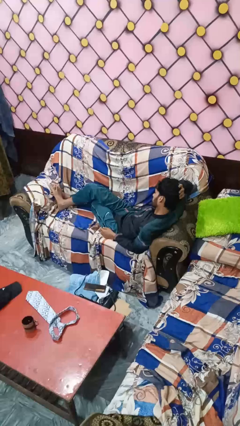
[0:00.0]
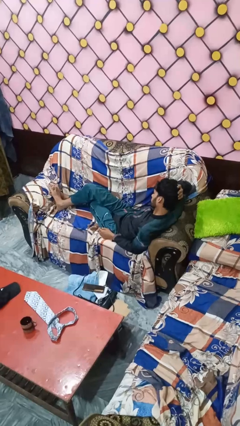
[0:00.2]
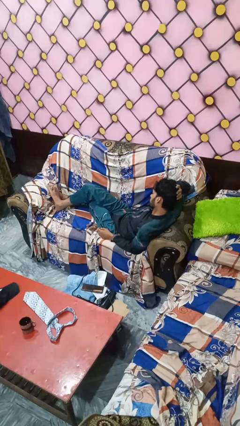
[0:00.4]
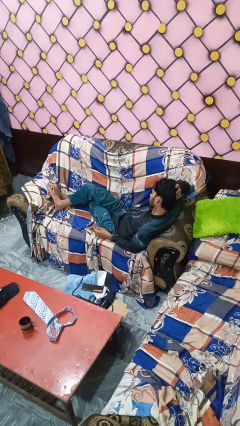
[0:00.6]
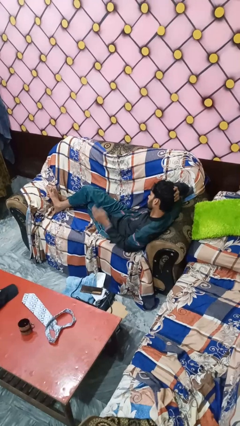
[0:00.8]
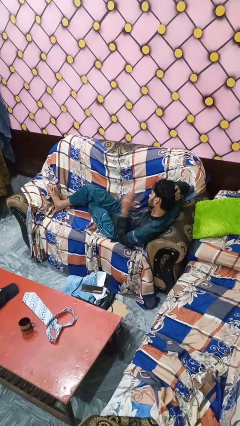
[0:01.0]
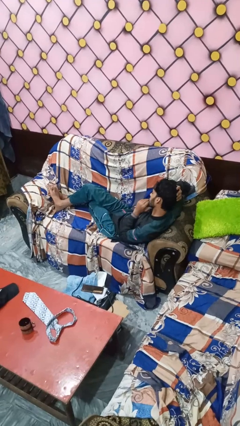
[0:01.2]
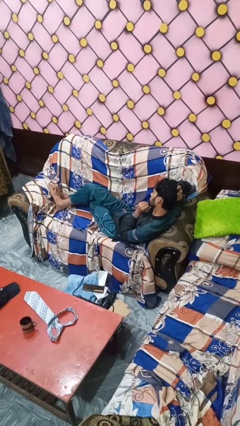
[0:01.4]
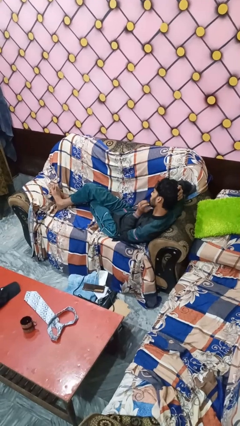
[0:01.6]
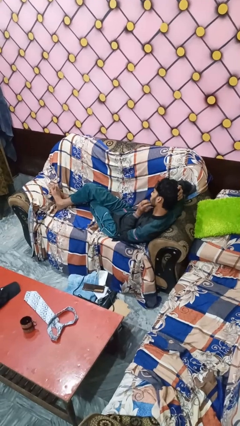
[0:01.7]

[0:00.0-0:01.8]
person strokes chin

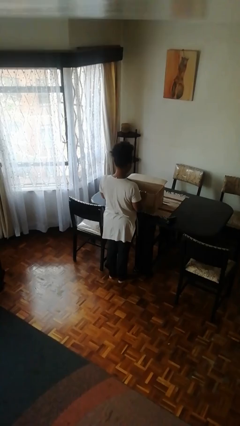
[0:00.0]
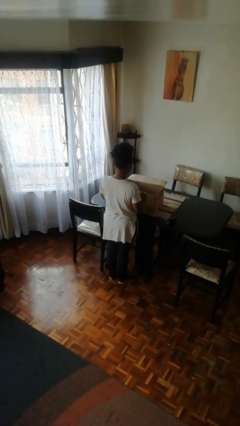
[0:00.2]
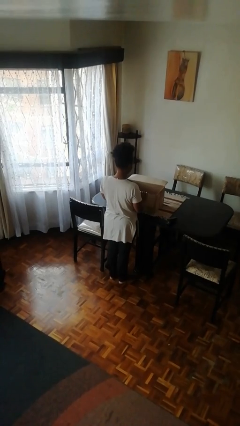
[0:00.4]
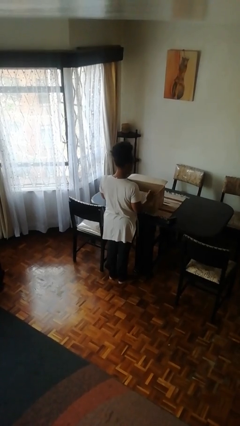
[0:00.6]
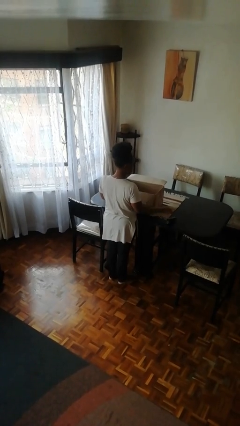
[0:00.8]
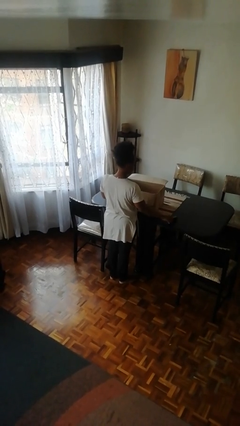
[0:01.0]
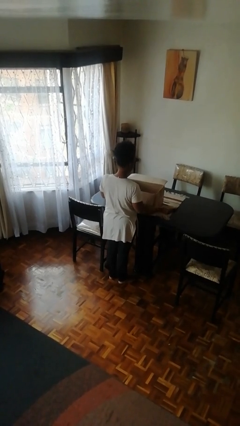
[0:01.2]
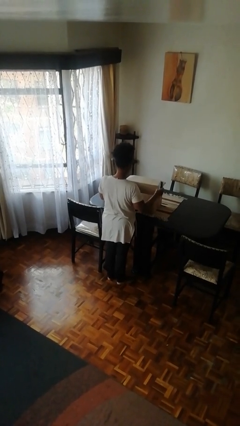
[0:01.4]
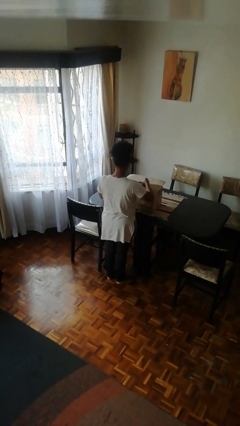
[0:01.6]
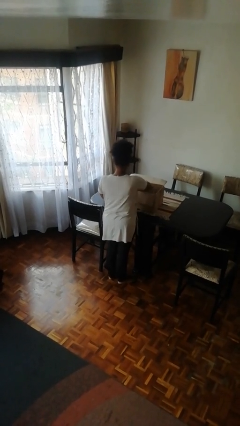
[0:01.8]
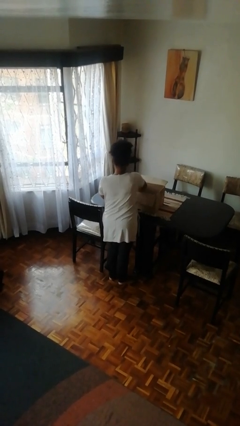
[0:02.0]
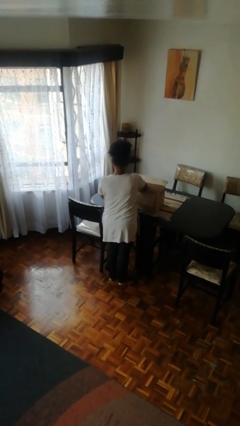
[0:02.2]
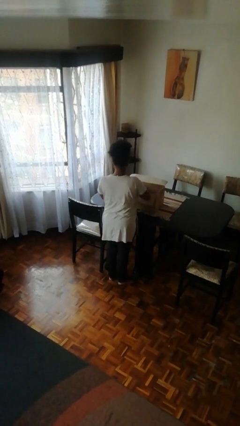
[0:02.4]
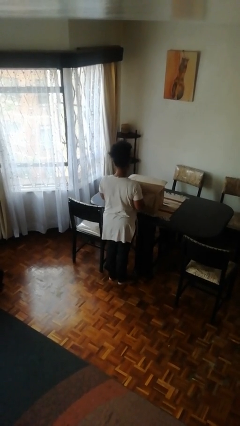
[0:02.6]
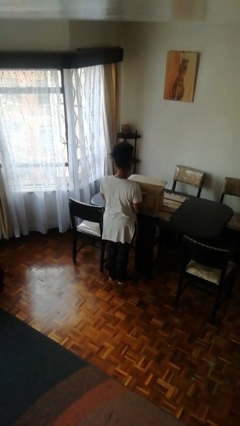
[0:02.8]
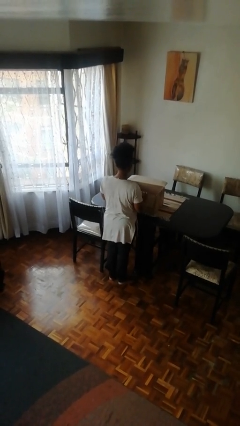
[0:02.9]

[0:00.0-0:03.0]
person puts object into box

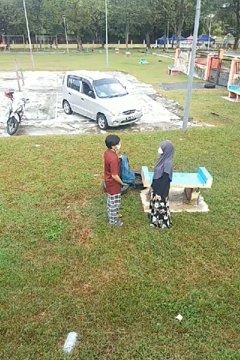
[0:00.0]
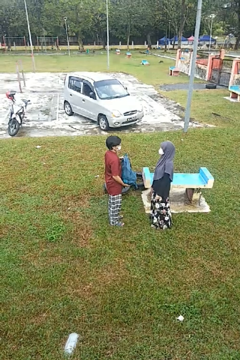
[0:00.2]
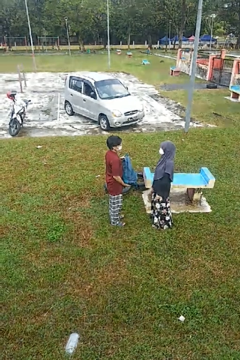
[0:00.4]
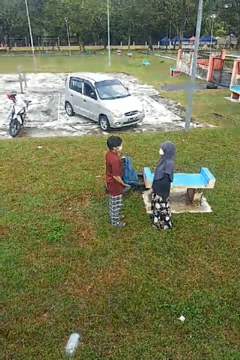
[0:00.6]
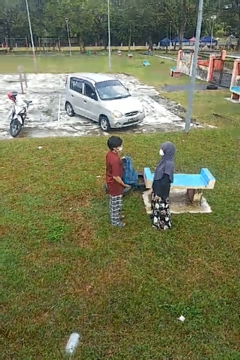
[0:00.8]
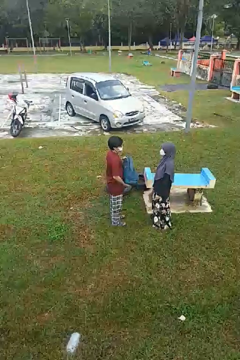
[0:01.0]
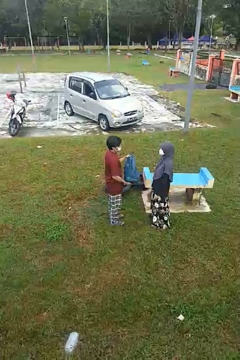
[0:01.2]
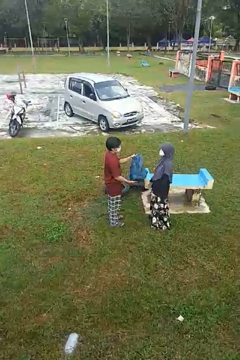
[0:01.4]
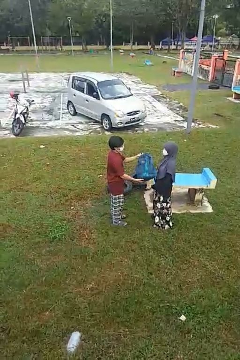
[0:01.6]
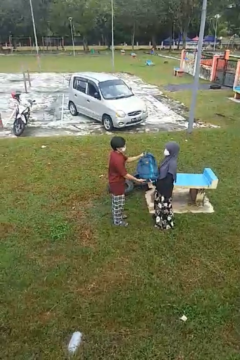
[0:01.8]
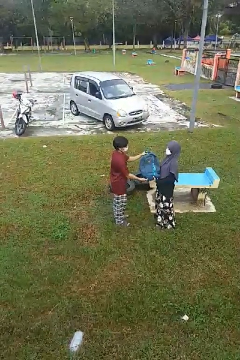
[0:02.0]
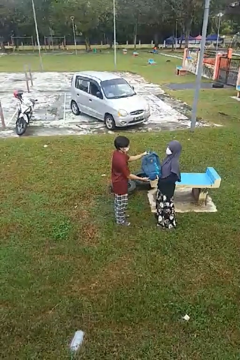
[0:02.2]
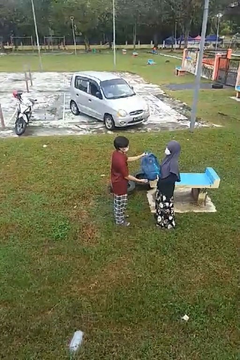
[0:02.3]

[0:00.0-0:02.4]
person transfers object to person

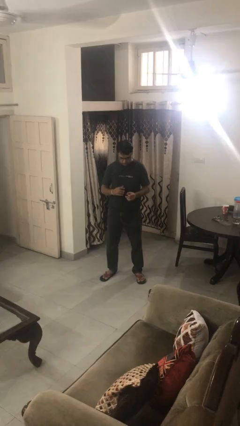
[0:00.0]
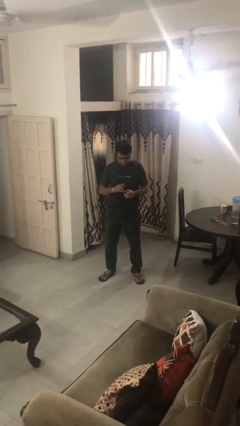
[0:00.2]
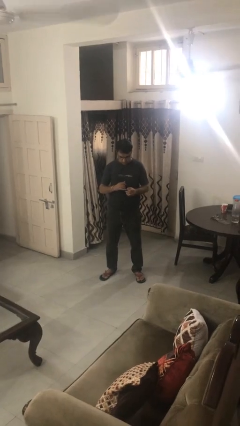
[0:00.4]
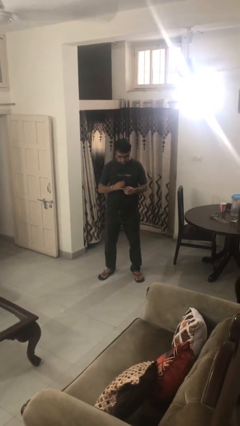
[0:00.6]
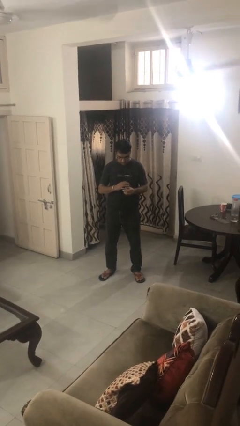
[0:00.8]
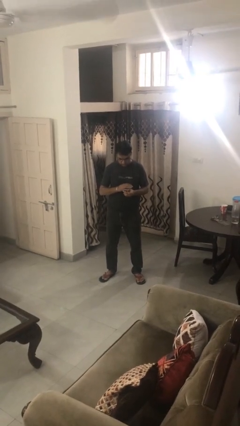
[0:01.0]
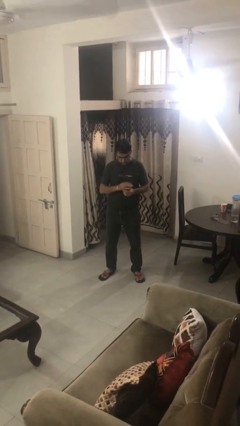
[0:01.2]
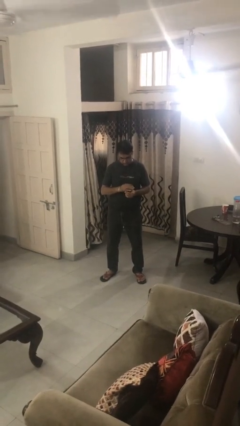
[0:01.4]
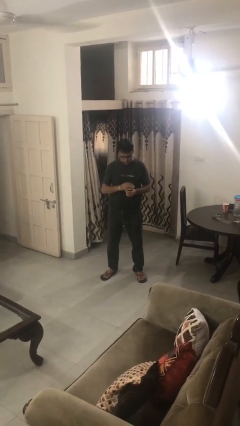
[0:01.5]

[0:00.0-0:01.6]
person puts on ring

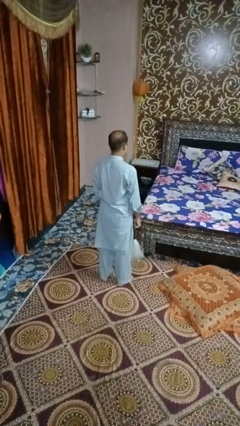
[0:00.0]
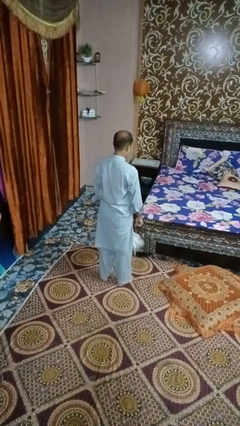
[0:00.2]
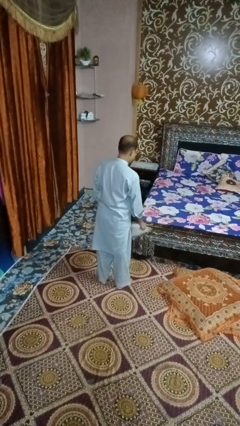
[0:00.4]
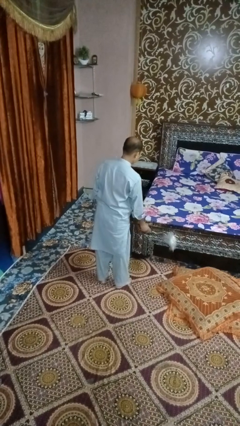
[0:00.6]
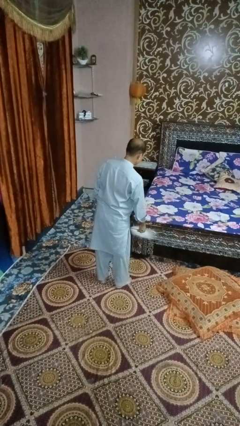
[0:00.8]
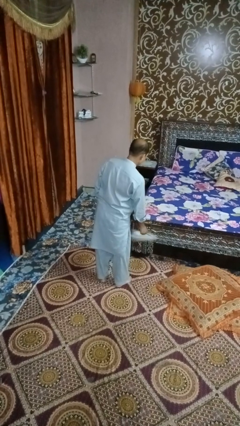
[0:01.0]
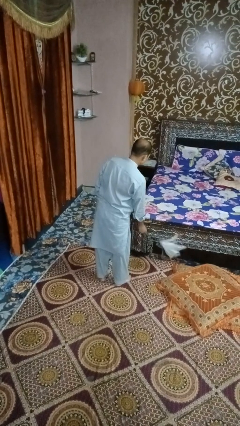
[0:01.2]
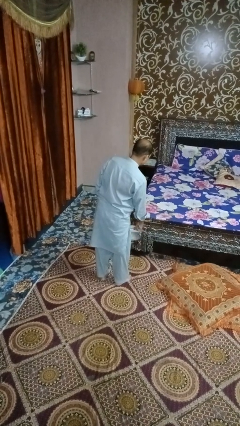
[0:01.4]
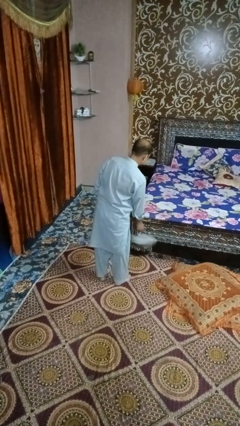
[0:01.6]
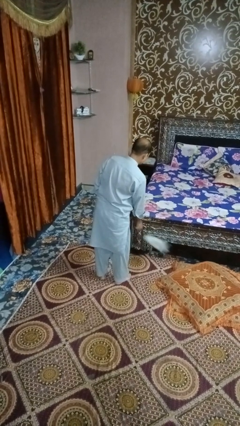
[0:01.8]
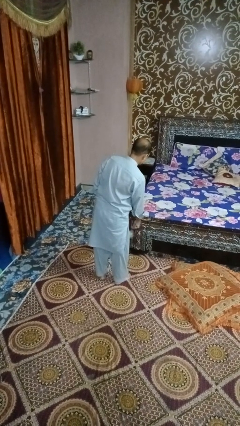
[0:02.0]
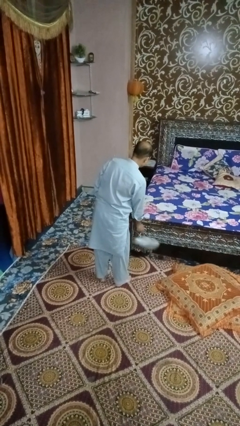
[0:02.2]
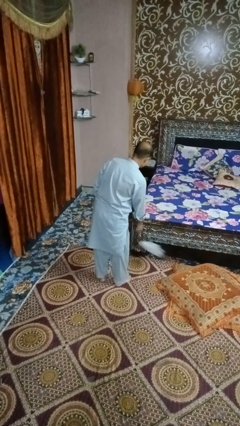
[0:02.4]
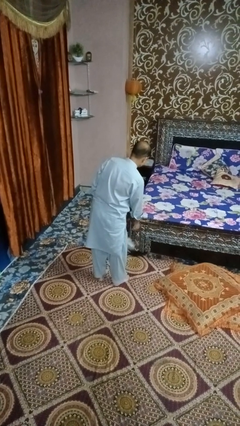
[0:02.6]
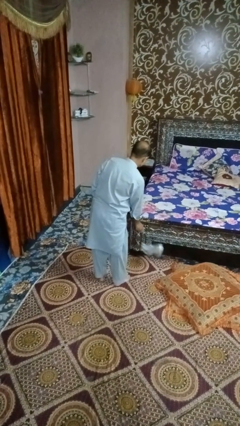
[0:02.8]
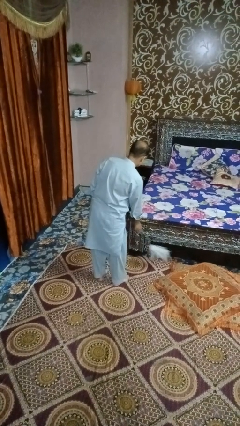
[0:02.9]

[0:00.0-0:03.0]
person dusts furniture

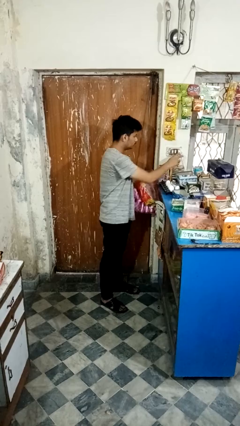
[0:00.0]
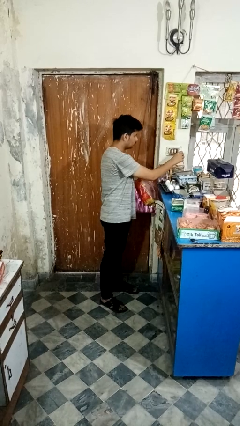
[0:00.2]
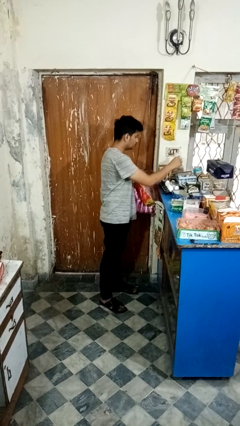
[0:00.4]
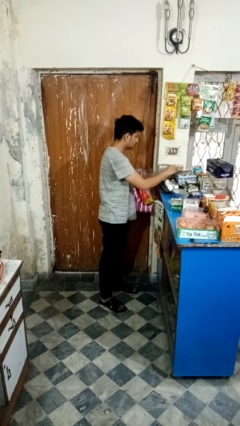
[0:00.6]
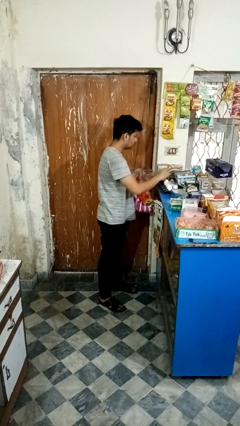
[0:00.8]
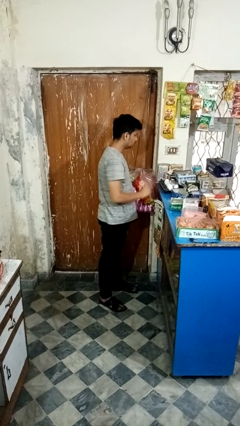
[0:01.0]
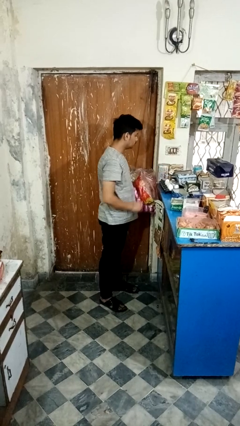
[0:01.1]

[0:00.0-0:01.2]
person unplugs from electrical socket

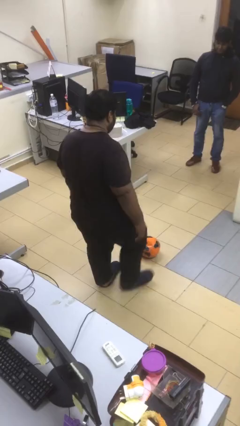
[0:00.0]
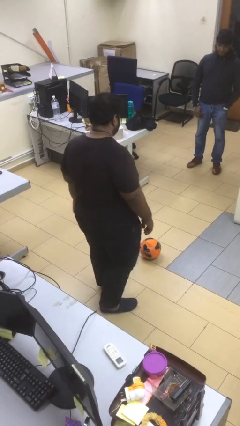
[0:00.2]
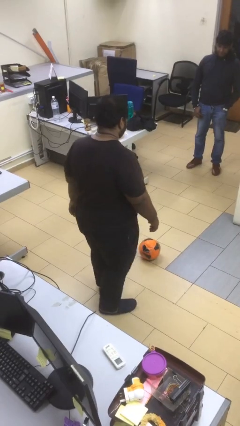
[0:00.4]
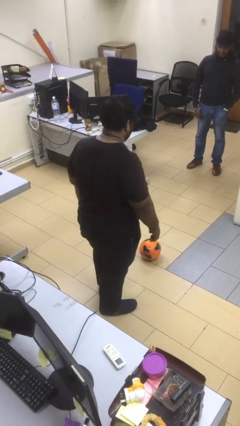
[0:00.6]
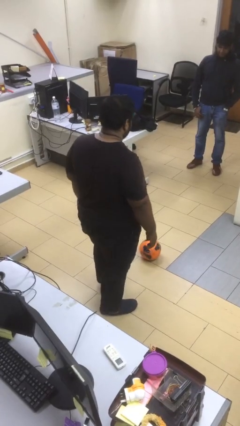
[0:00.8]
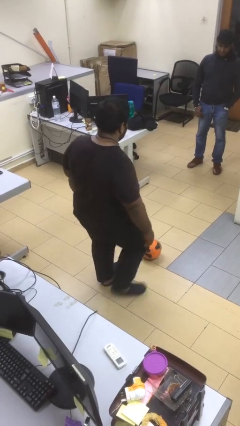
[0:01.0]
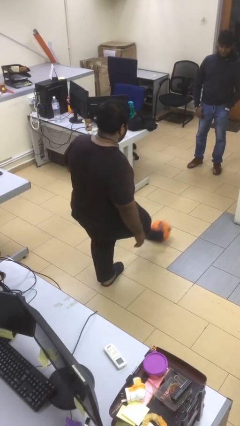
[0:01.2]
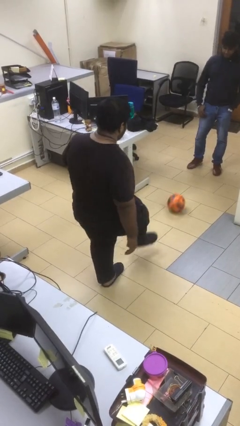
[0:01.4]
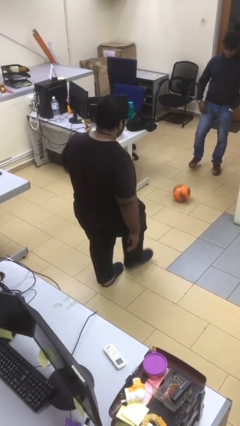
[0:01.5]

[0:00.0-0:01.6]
person kicks object to person

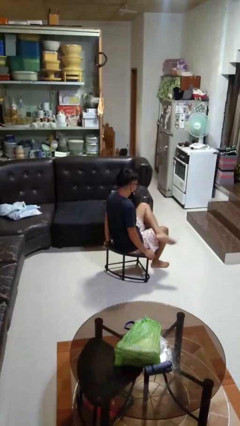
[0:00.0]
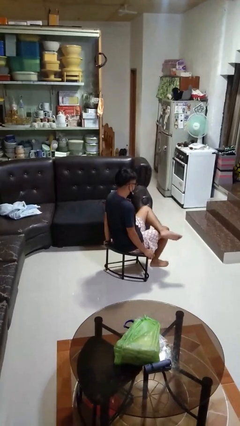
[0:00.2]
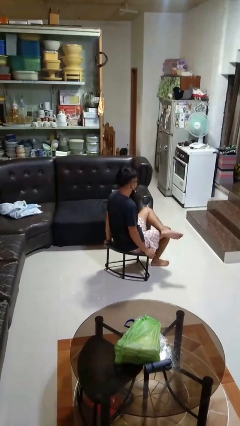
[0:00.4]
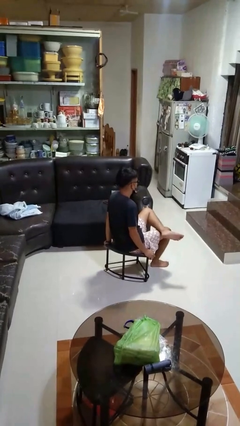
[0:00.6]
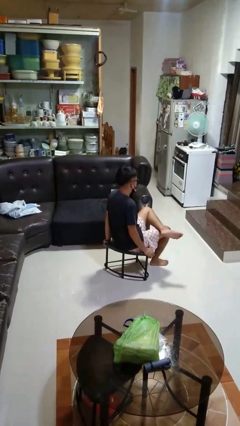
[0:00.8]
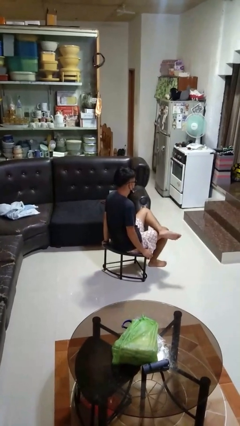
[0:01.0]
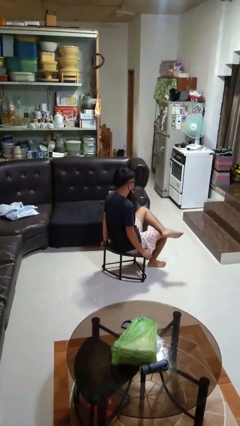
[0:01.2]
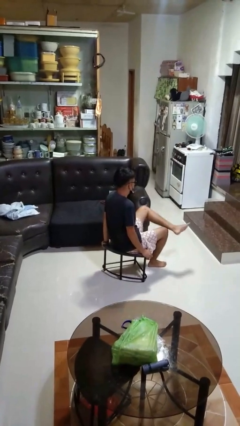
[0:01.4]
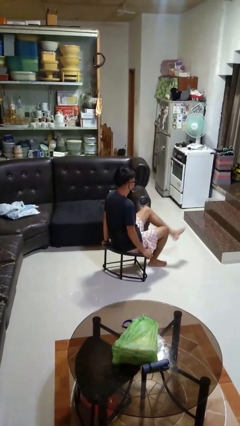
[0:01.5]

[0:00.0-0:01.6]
person crosses legs

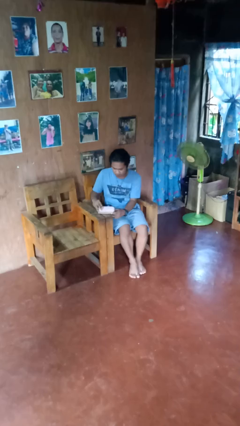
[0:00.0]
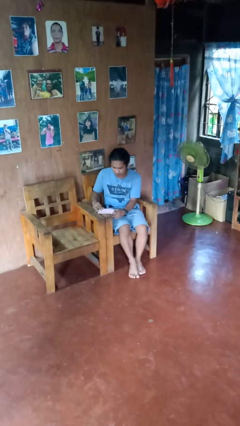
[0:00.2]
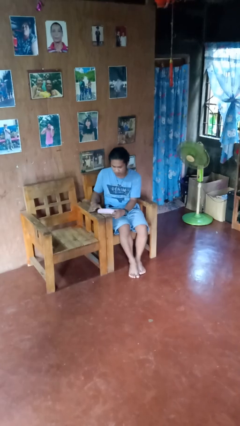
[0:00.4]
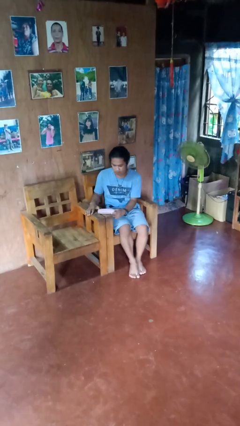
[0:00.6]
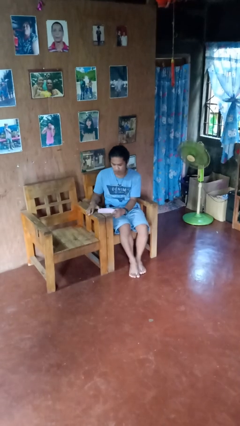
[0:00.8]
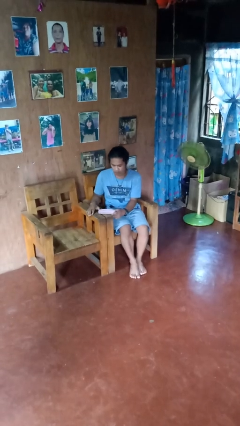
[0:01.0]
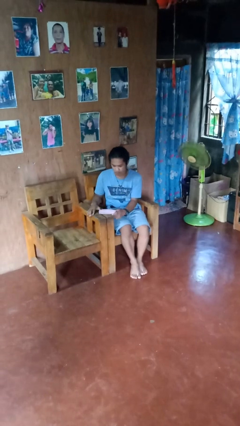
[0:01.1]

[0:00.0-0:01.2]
person closes jewelry box
